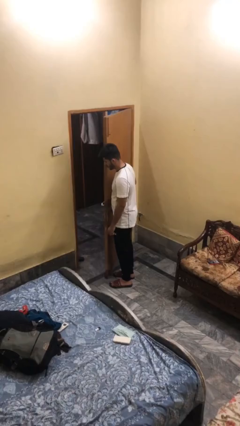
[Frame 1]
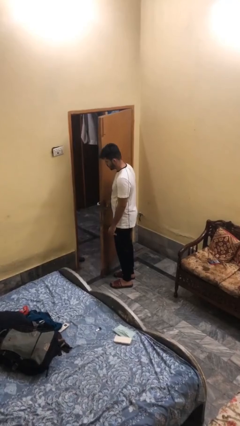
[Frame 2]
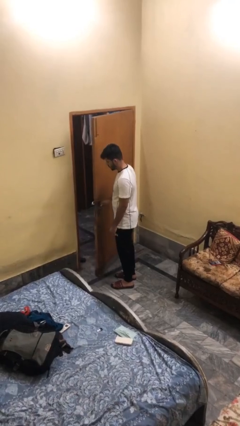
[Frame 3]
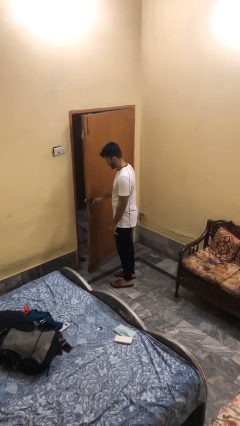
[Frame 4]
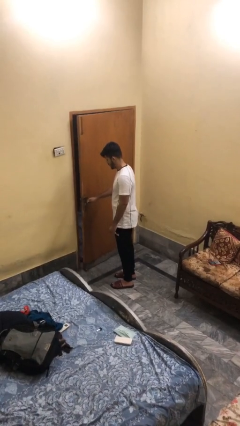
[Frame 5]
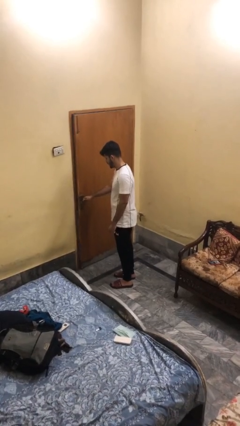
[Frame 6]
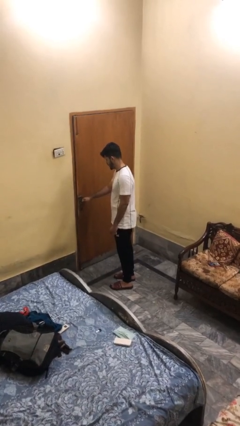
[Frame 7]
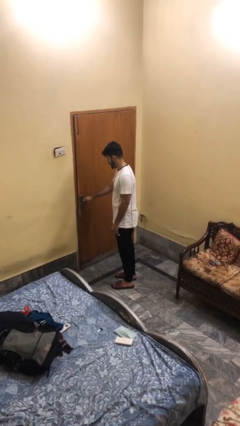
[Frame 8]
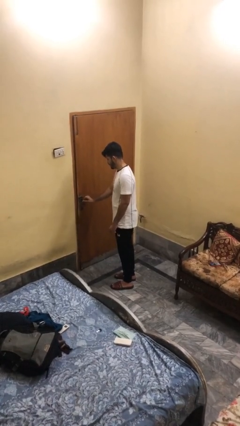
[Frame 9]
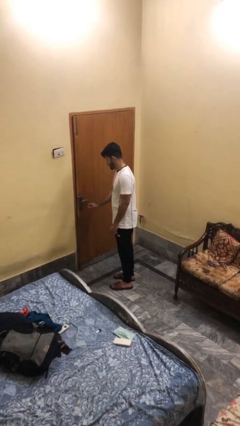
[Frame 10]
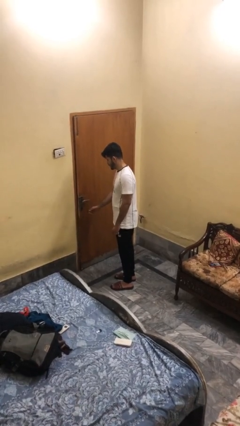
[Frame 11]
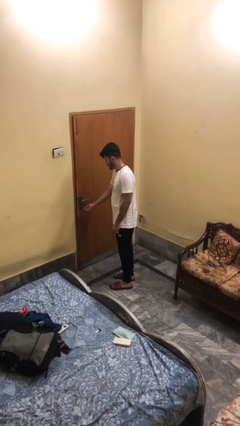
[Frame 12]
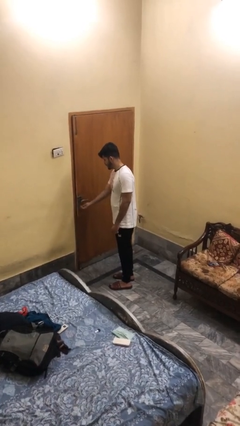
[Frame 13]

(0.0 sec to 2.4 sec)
person closes facility door

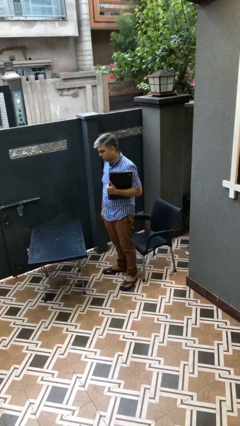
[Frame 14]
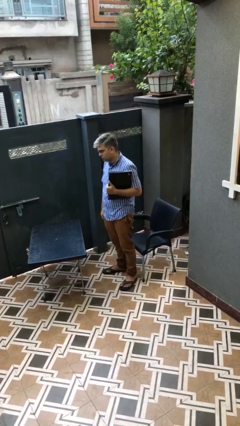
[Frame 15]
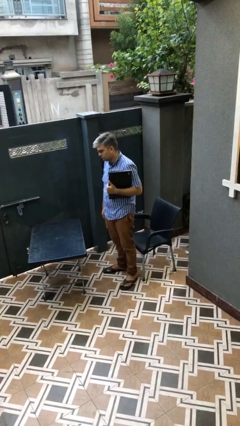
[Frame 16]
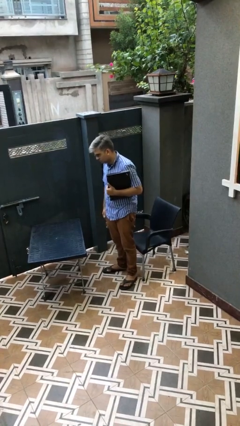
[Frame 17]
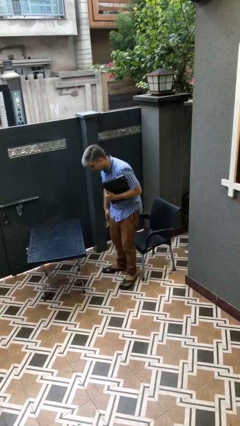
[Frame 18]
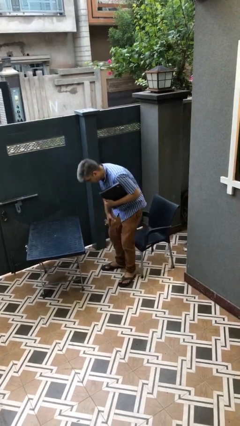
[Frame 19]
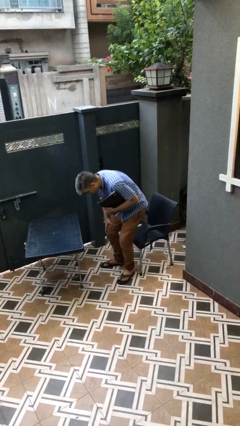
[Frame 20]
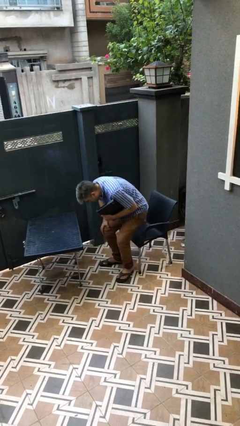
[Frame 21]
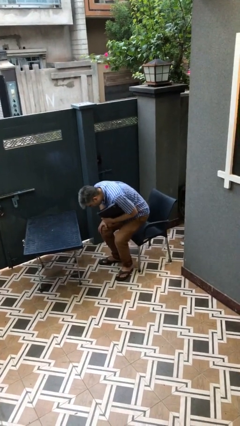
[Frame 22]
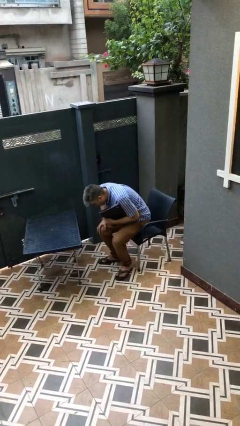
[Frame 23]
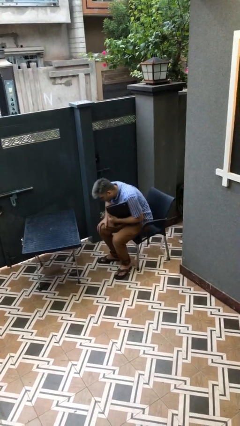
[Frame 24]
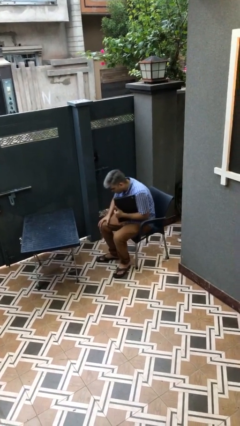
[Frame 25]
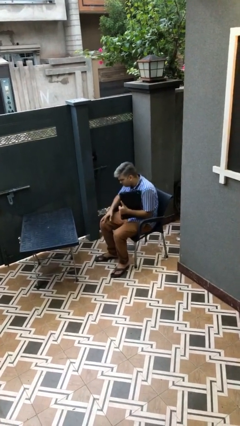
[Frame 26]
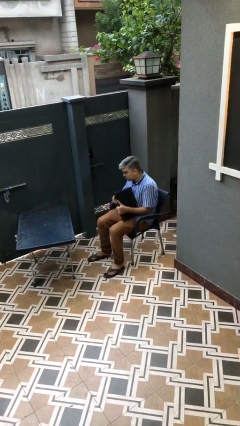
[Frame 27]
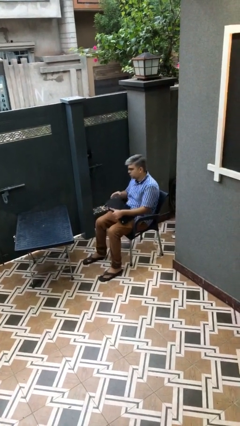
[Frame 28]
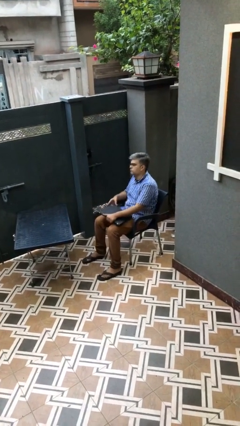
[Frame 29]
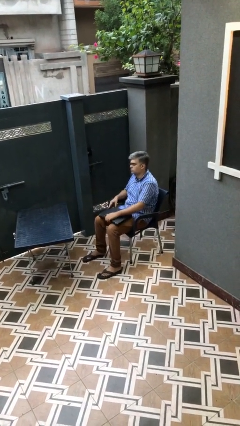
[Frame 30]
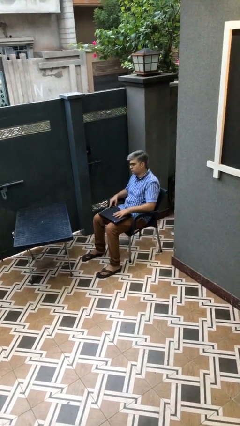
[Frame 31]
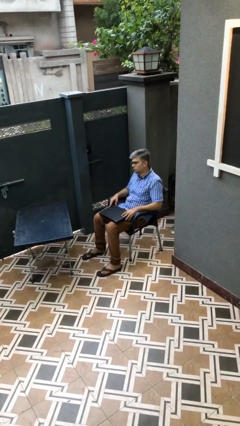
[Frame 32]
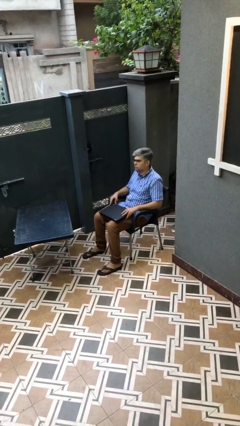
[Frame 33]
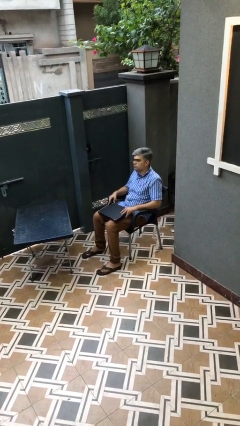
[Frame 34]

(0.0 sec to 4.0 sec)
person sits down

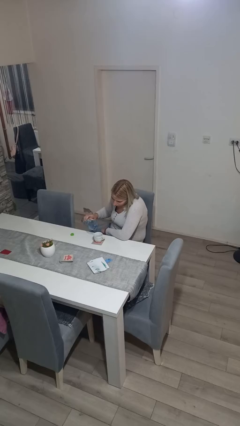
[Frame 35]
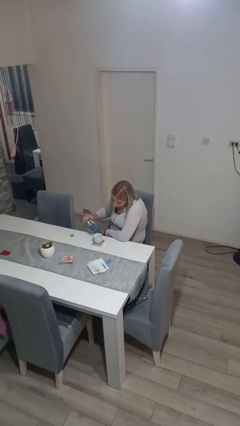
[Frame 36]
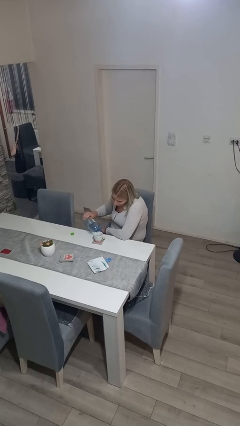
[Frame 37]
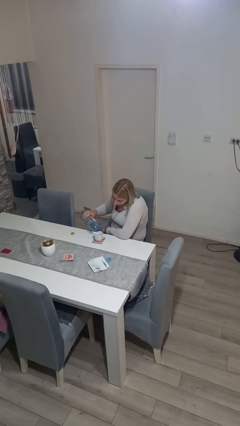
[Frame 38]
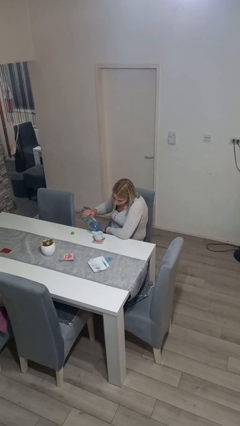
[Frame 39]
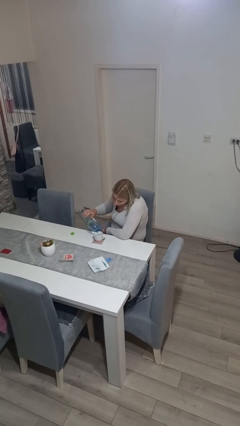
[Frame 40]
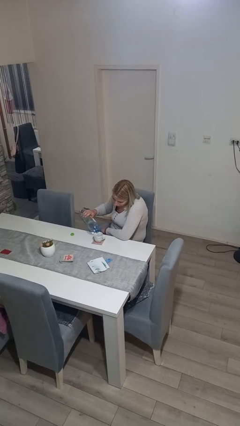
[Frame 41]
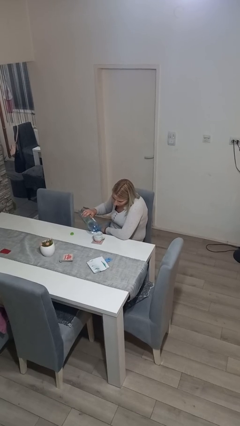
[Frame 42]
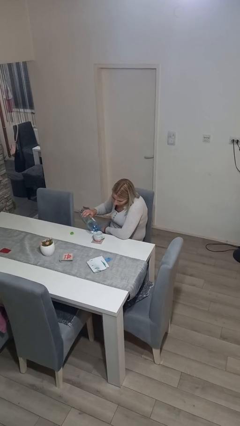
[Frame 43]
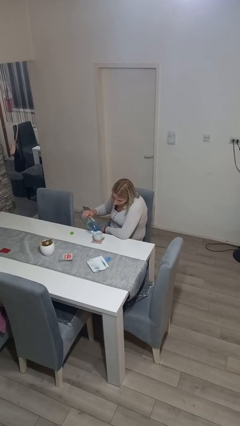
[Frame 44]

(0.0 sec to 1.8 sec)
person pours liquid into cup

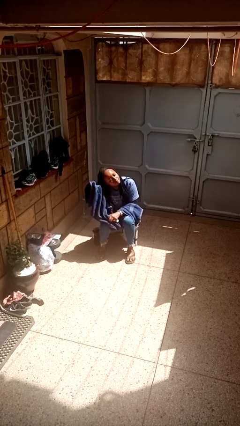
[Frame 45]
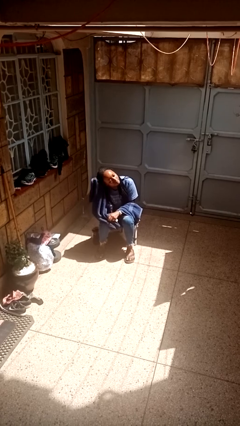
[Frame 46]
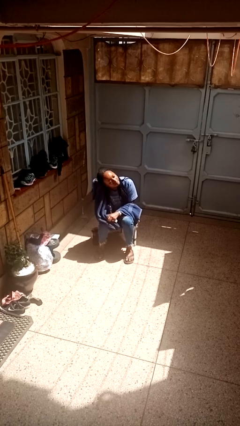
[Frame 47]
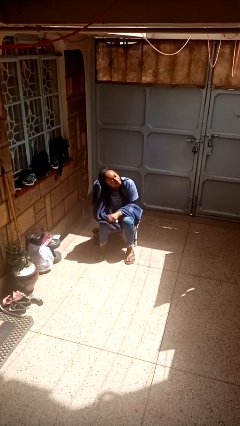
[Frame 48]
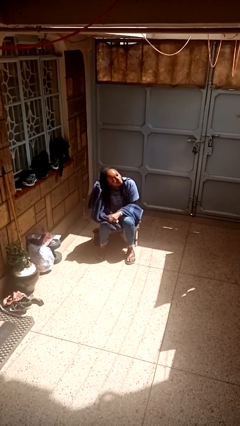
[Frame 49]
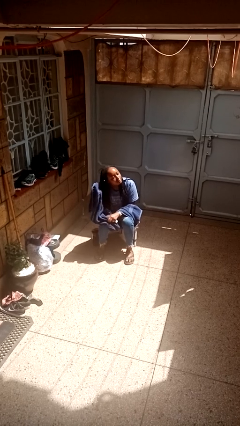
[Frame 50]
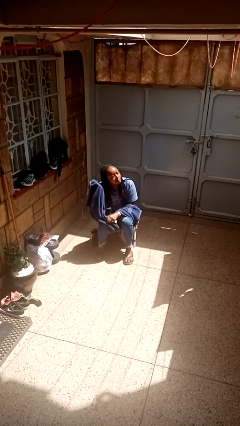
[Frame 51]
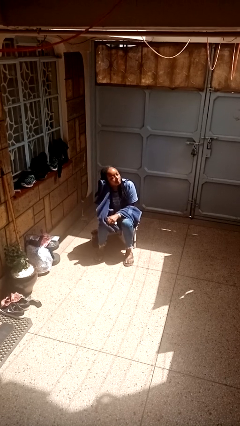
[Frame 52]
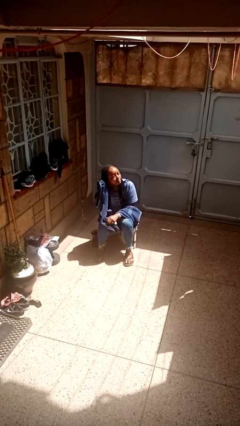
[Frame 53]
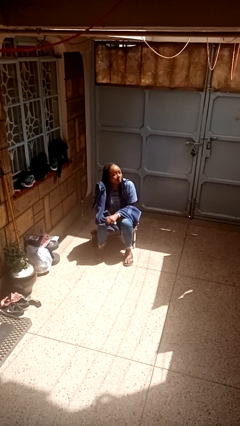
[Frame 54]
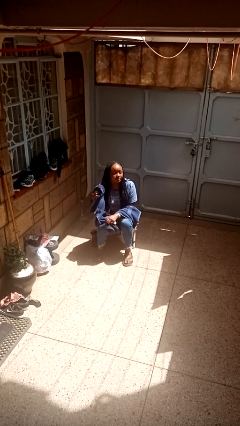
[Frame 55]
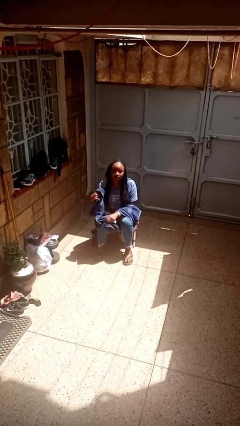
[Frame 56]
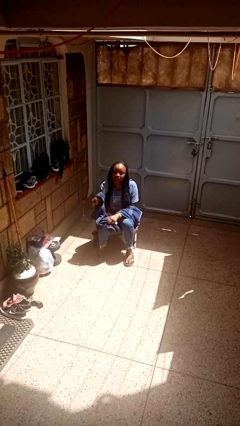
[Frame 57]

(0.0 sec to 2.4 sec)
person dries hair with towel

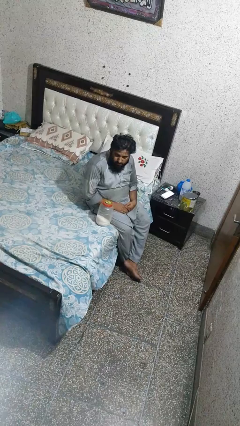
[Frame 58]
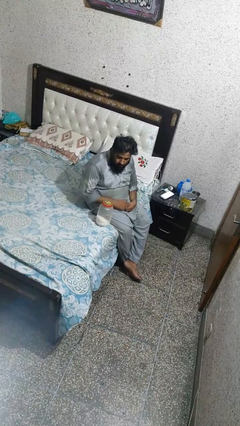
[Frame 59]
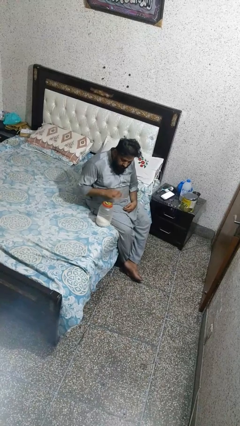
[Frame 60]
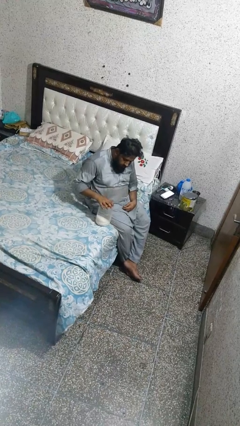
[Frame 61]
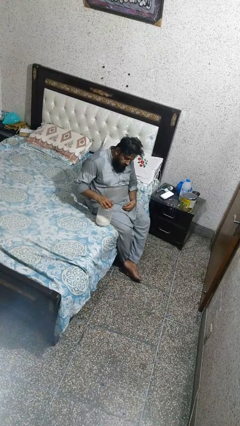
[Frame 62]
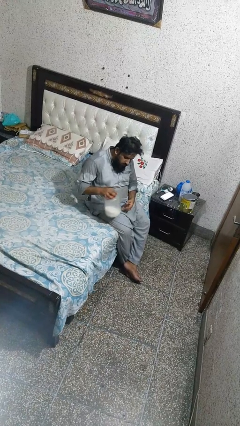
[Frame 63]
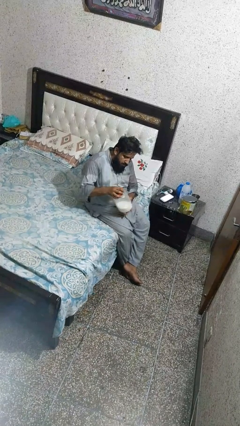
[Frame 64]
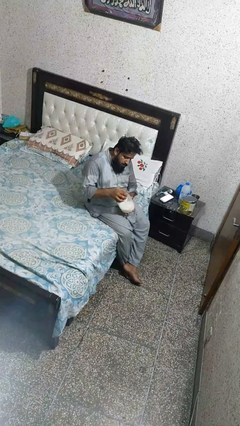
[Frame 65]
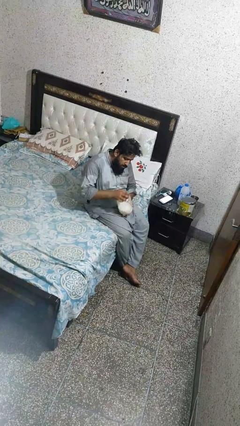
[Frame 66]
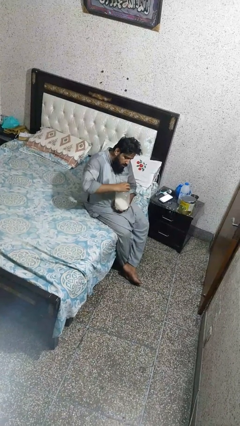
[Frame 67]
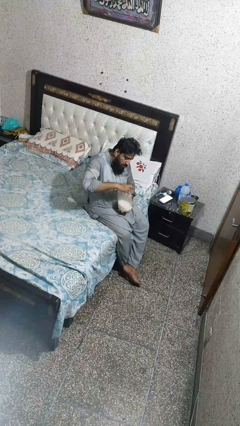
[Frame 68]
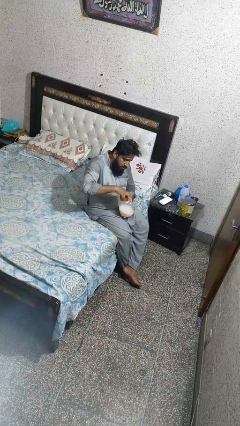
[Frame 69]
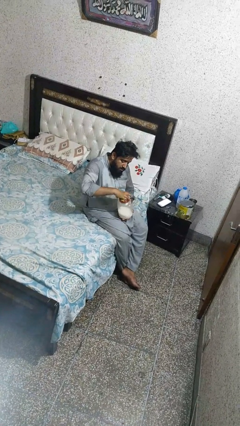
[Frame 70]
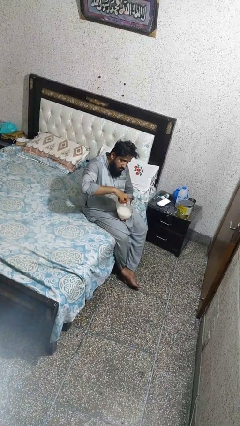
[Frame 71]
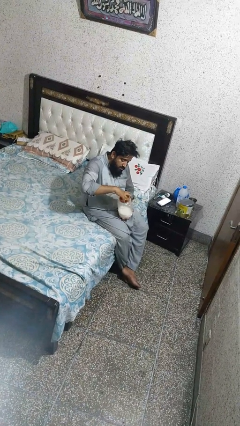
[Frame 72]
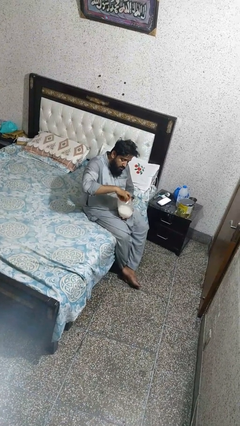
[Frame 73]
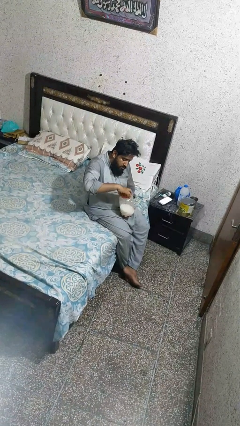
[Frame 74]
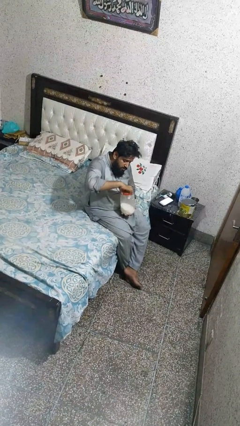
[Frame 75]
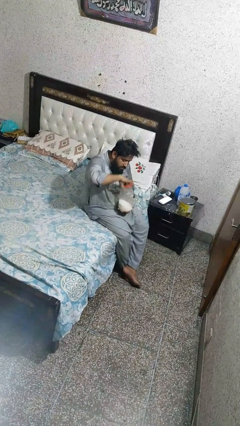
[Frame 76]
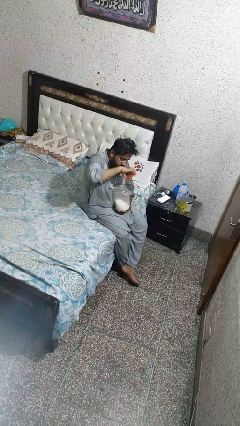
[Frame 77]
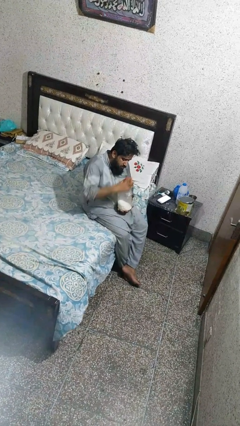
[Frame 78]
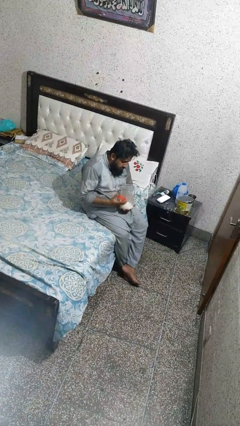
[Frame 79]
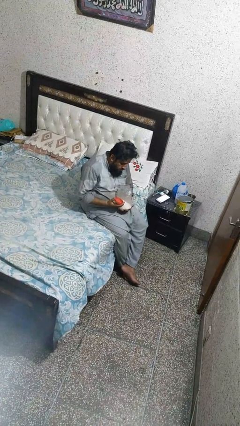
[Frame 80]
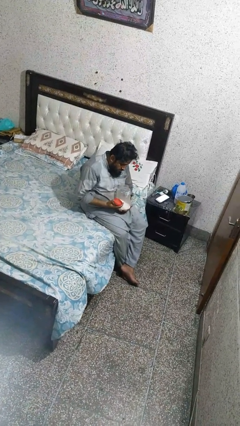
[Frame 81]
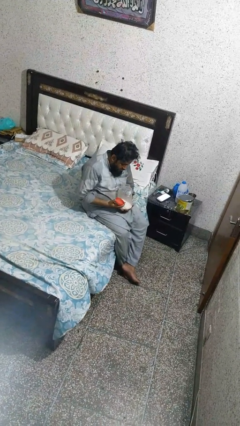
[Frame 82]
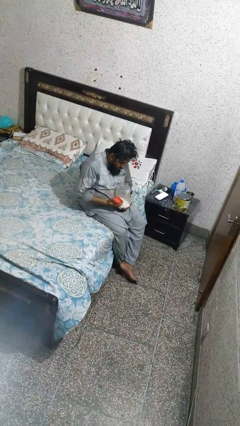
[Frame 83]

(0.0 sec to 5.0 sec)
person opens jar

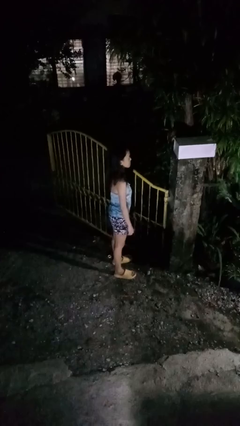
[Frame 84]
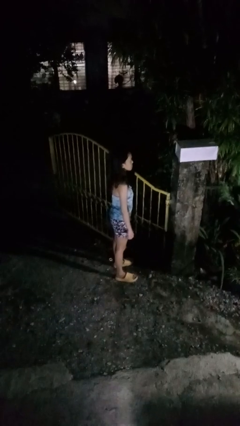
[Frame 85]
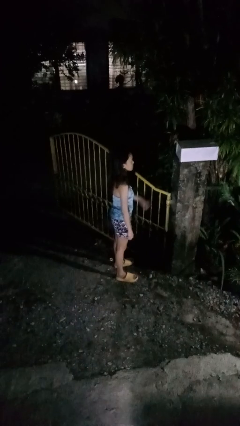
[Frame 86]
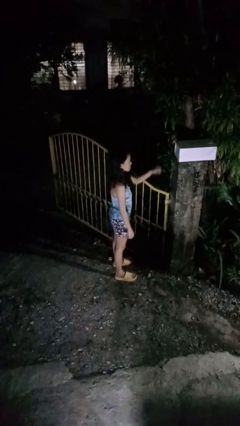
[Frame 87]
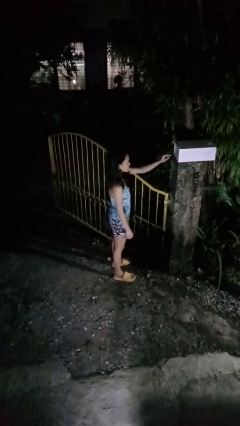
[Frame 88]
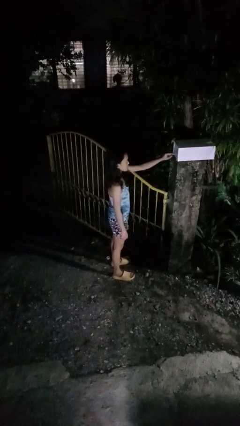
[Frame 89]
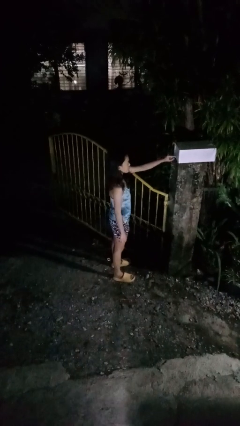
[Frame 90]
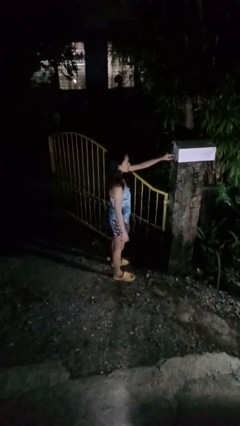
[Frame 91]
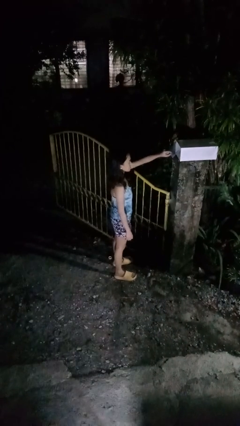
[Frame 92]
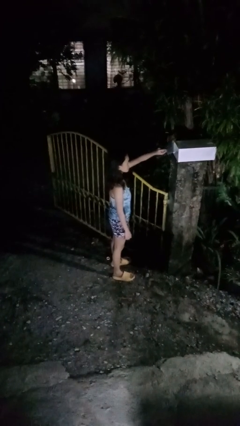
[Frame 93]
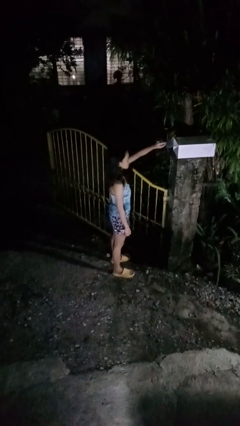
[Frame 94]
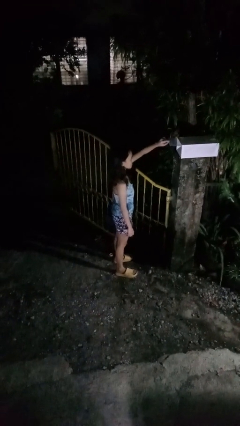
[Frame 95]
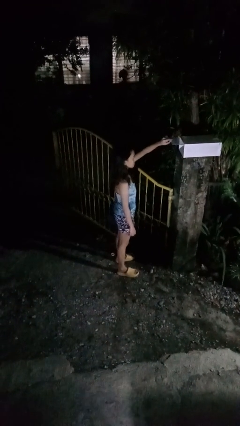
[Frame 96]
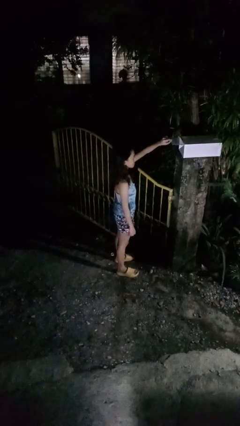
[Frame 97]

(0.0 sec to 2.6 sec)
person opens mailbox
